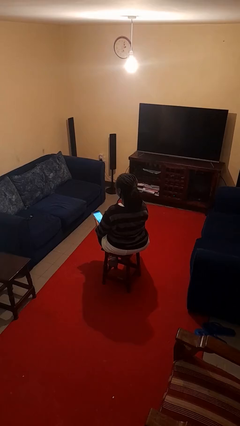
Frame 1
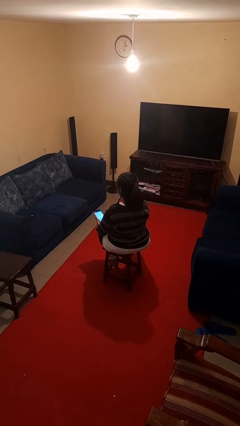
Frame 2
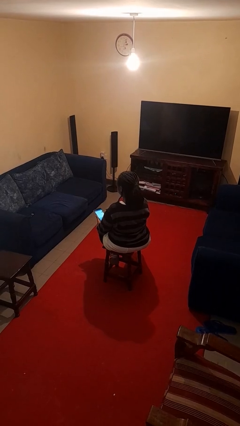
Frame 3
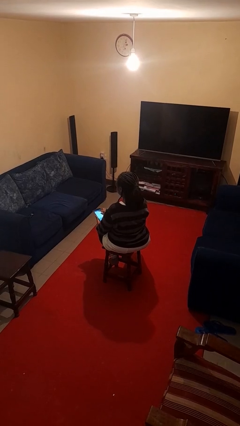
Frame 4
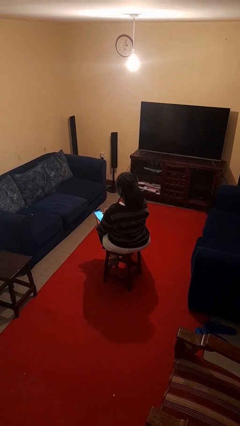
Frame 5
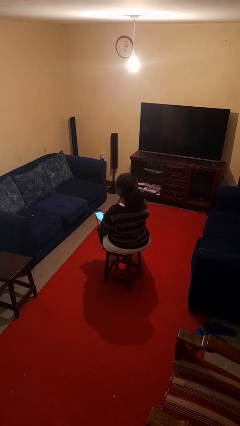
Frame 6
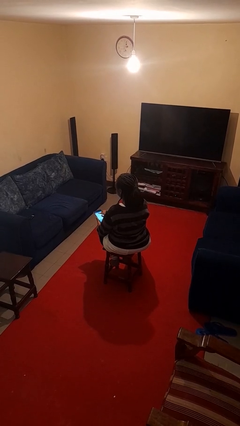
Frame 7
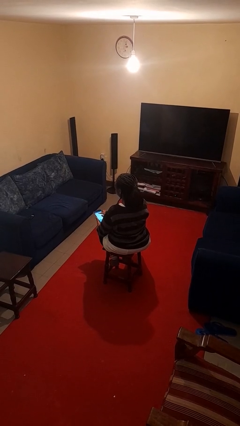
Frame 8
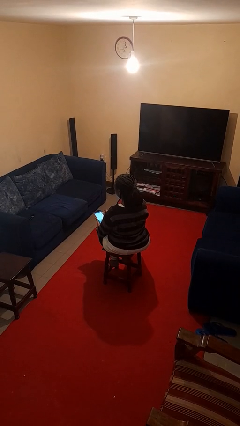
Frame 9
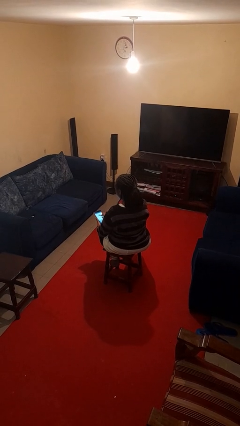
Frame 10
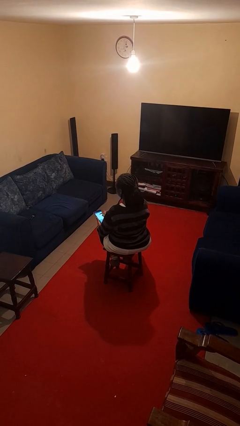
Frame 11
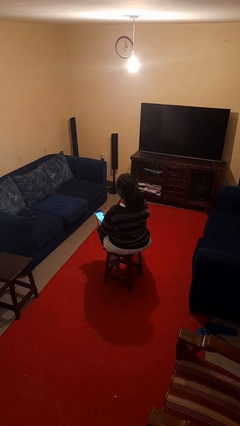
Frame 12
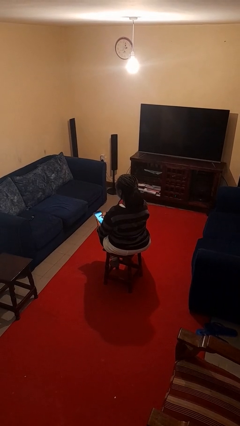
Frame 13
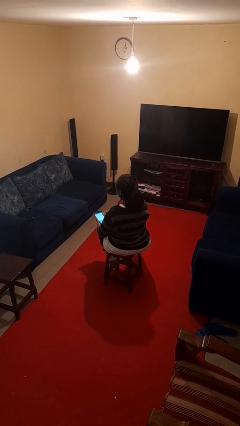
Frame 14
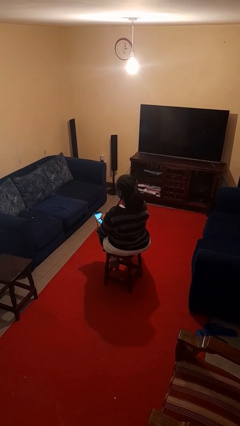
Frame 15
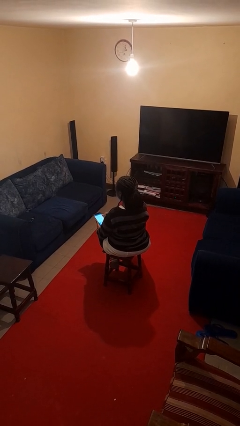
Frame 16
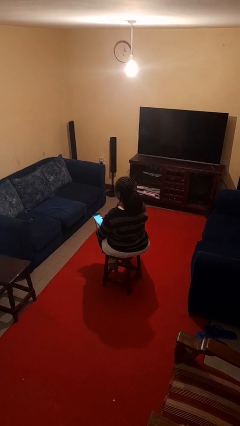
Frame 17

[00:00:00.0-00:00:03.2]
person interacts with tablet

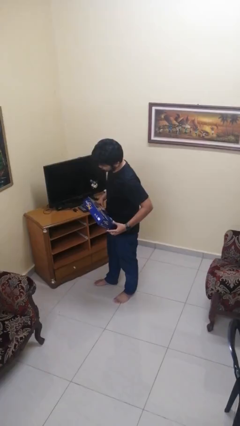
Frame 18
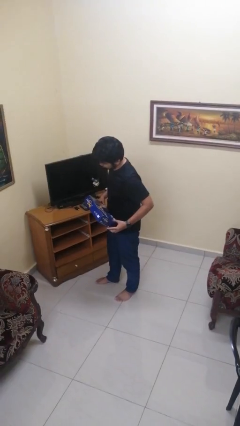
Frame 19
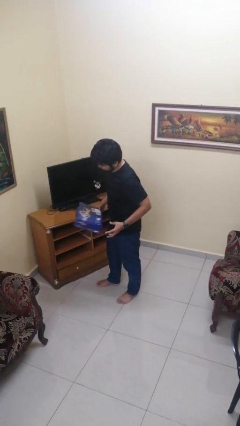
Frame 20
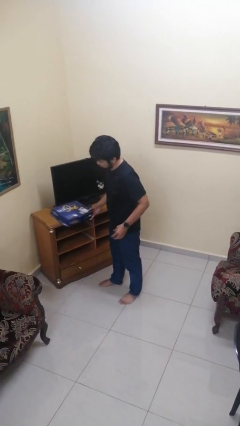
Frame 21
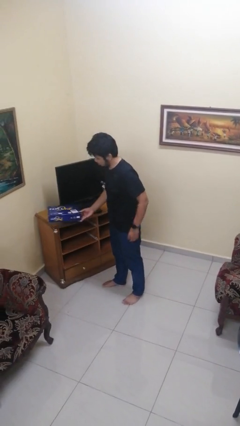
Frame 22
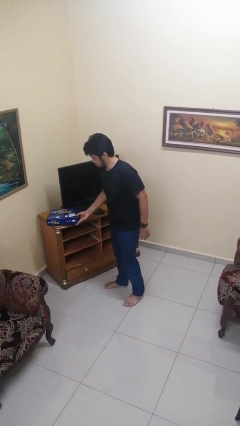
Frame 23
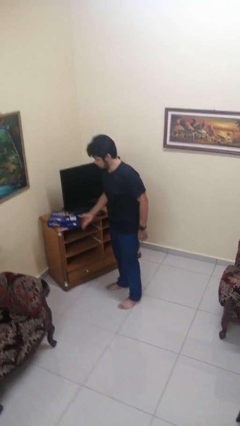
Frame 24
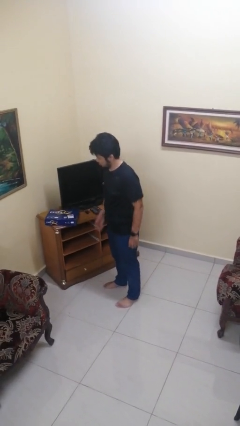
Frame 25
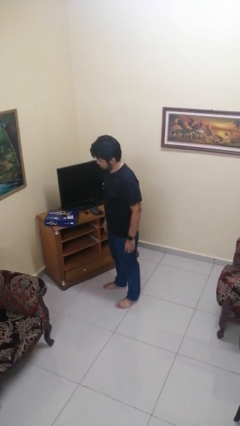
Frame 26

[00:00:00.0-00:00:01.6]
person puts down object on countertop

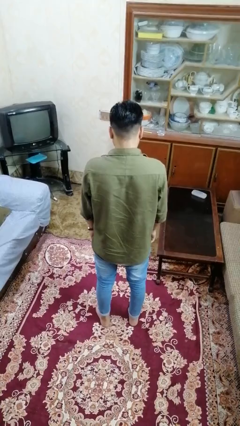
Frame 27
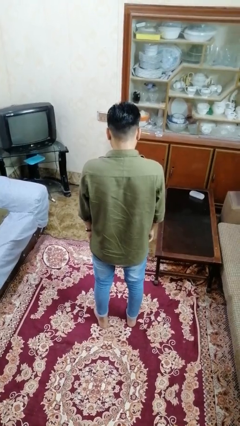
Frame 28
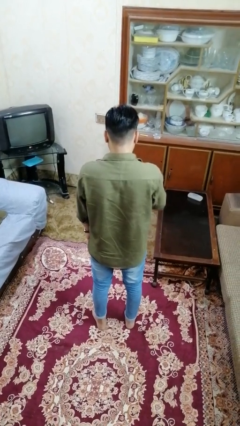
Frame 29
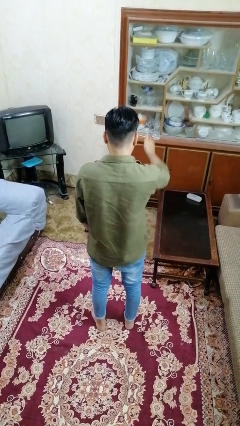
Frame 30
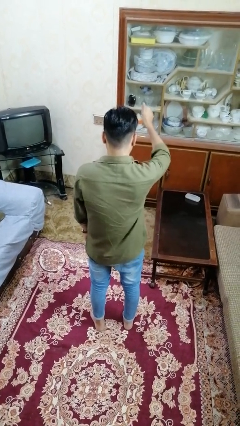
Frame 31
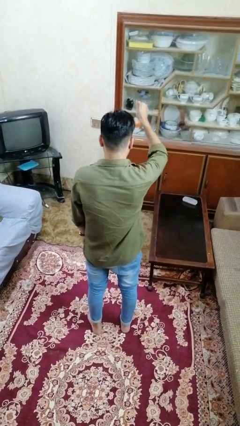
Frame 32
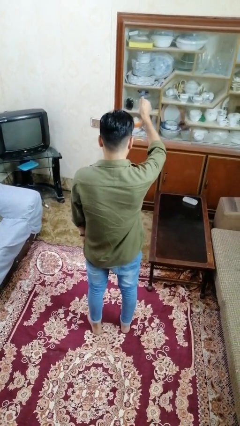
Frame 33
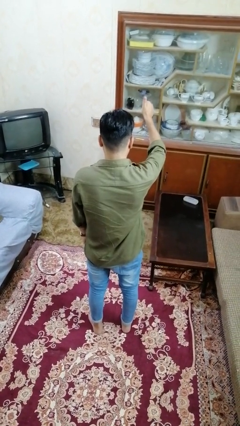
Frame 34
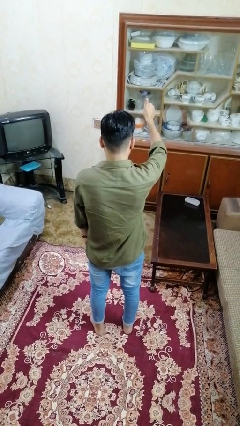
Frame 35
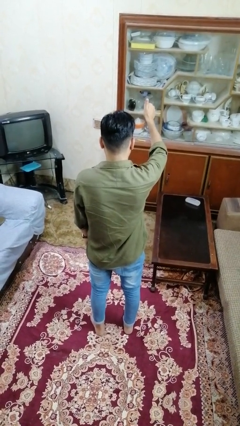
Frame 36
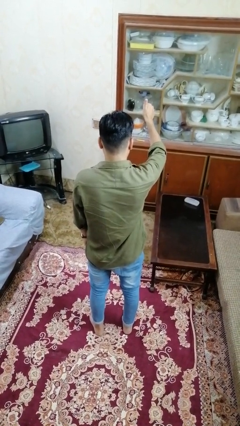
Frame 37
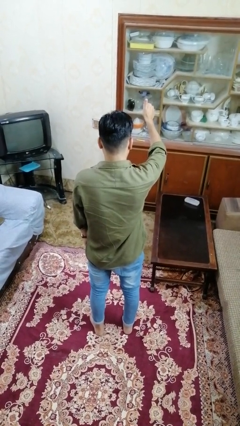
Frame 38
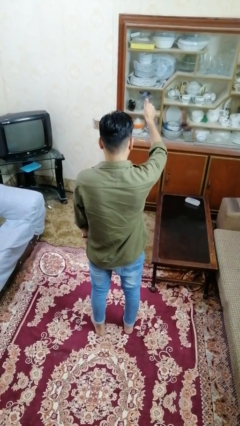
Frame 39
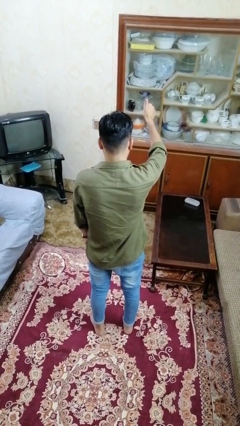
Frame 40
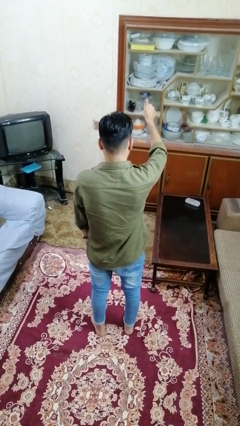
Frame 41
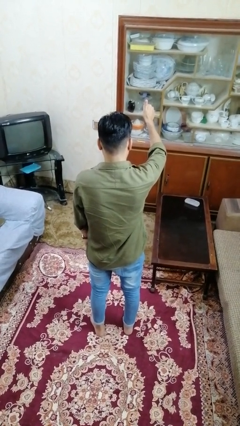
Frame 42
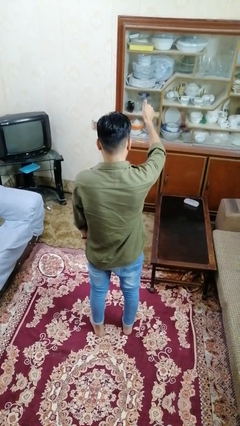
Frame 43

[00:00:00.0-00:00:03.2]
person gestures thumbs up

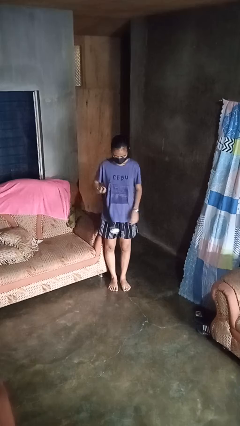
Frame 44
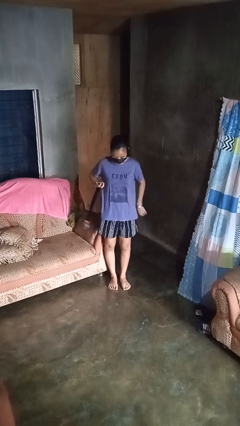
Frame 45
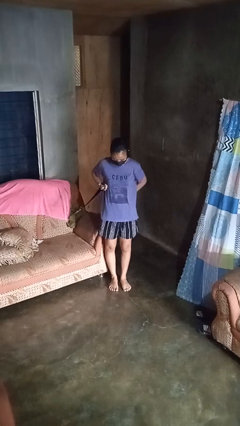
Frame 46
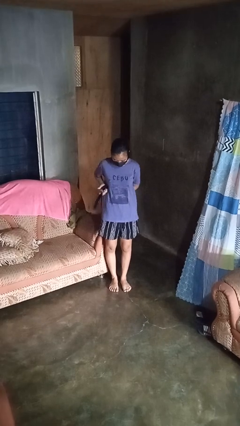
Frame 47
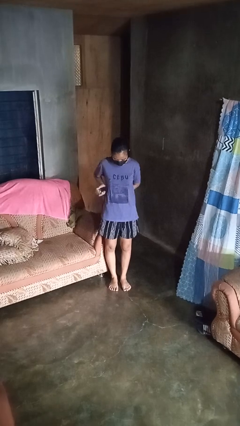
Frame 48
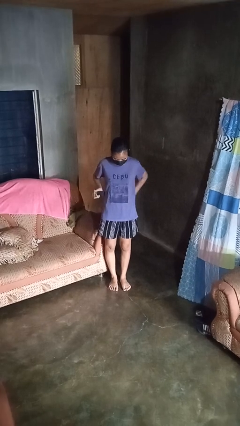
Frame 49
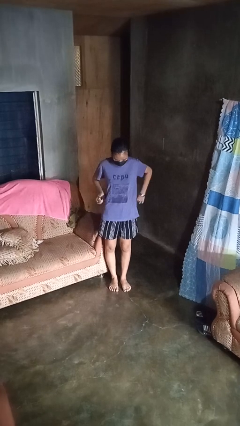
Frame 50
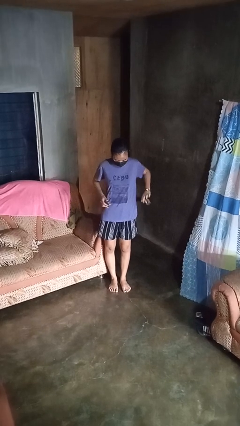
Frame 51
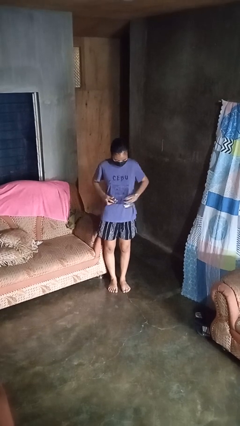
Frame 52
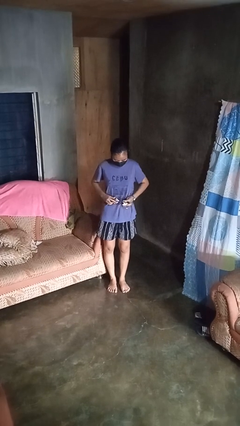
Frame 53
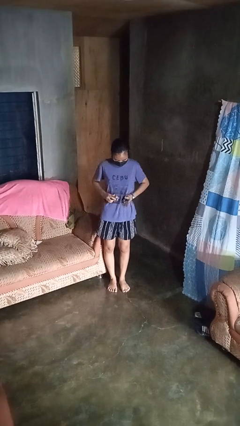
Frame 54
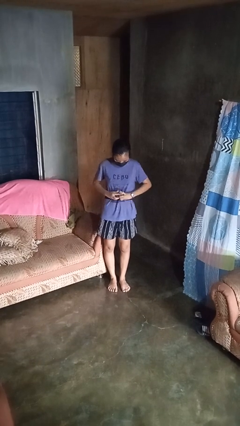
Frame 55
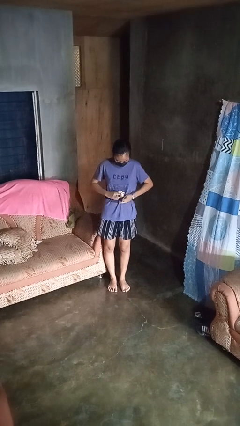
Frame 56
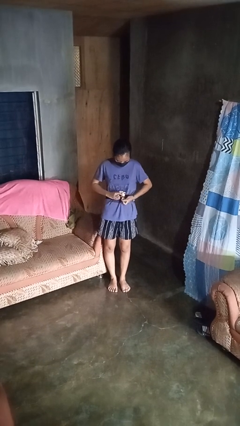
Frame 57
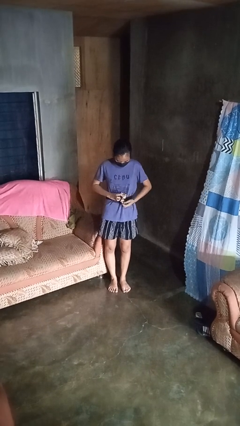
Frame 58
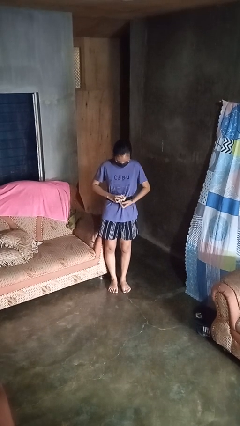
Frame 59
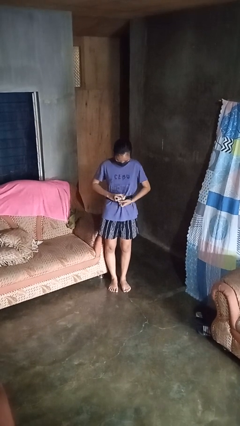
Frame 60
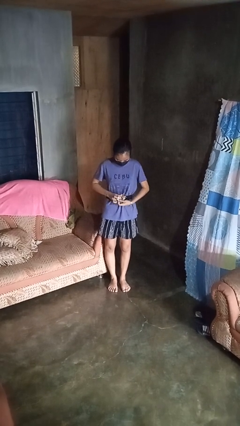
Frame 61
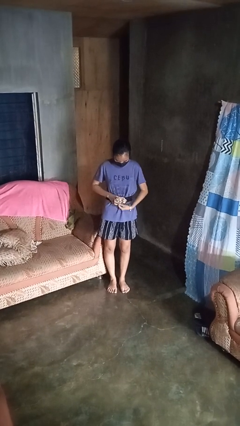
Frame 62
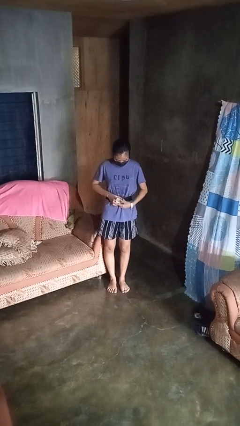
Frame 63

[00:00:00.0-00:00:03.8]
person puts on belt

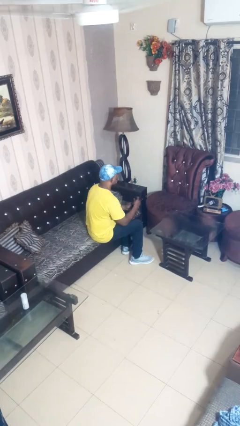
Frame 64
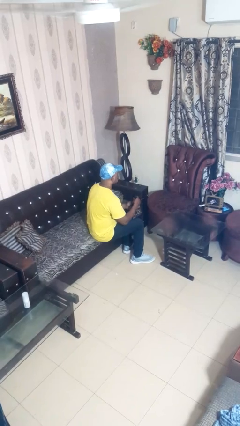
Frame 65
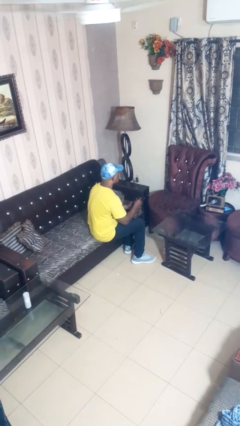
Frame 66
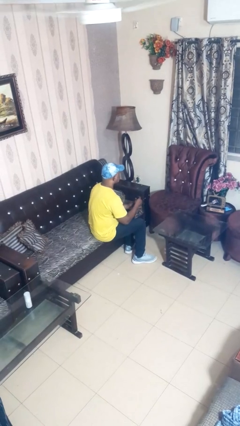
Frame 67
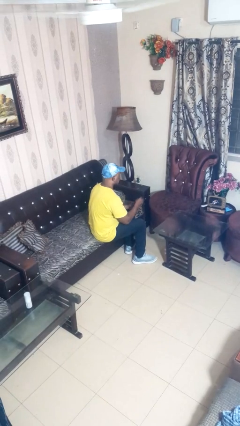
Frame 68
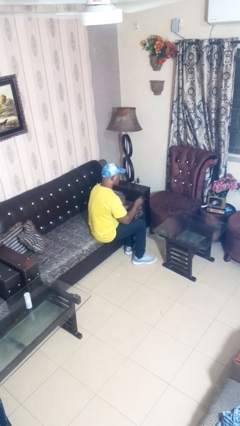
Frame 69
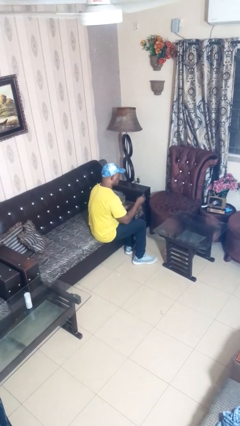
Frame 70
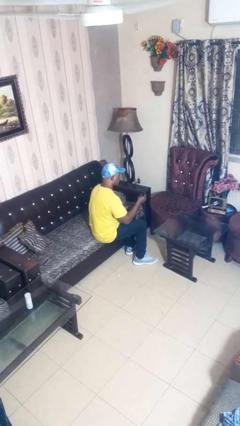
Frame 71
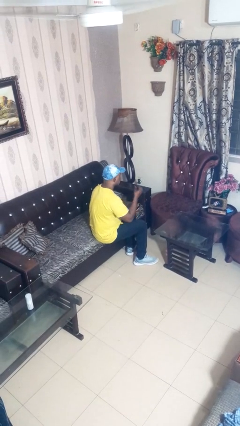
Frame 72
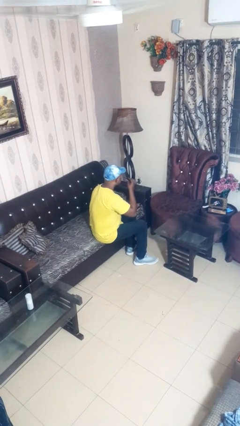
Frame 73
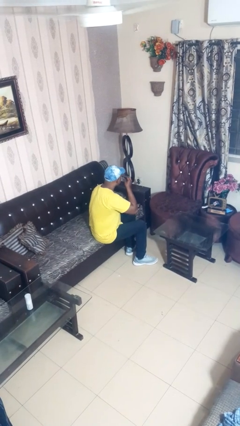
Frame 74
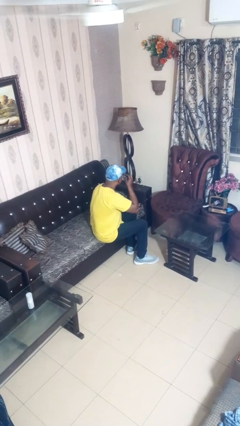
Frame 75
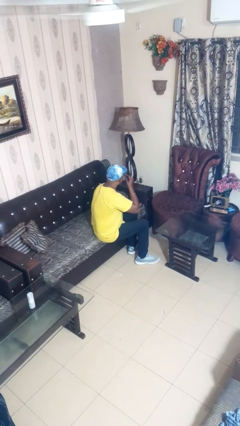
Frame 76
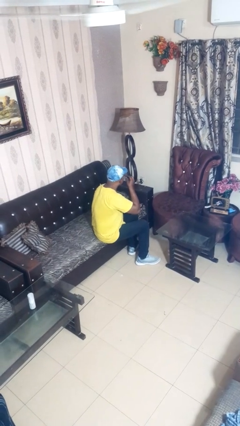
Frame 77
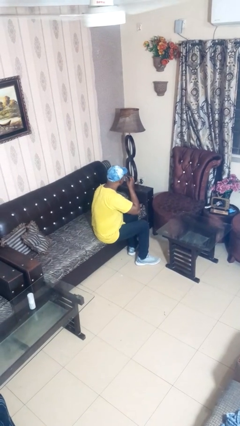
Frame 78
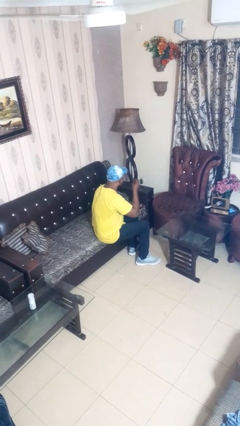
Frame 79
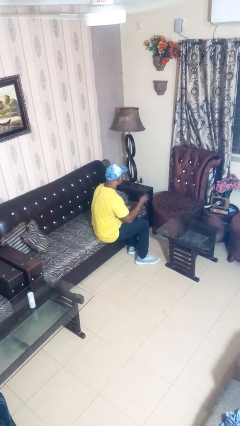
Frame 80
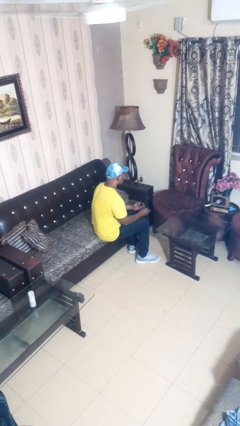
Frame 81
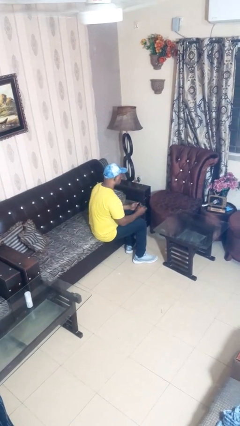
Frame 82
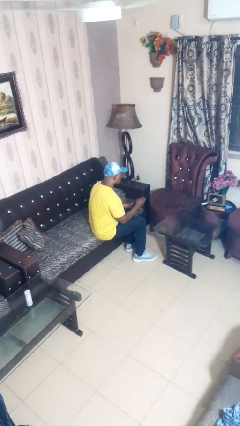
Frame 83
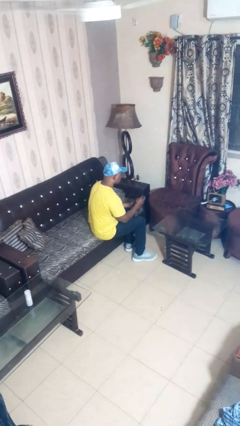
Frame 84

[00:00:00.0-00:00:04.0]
person applies eye makeup

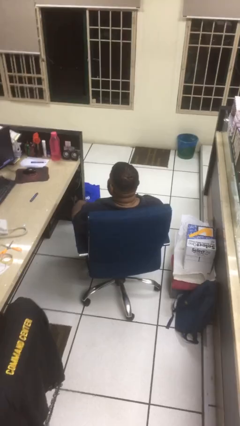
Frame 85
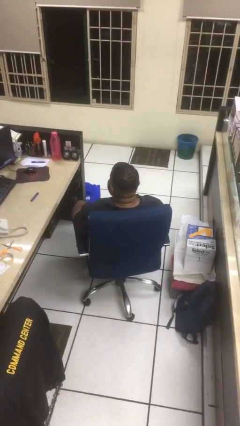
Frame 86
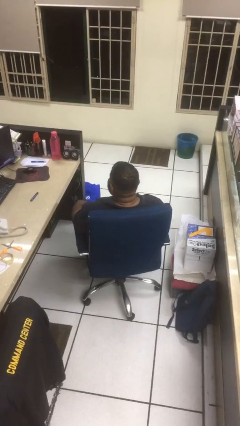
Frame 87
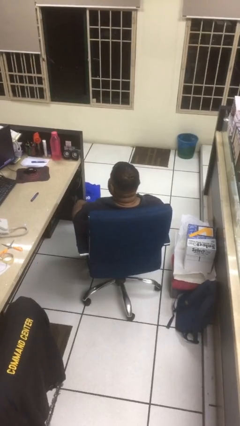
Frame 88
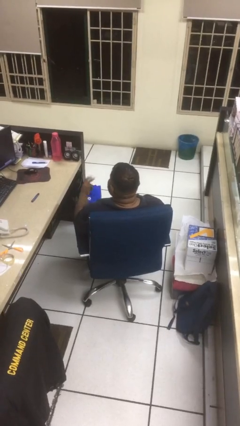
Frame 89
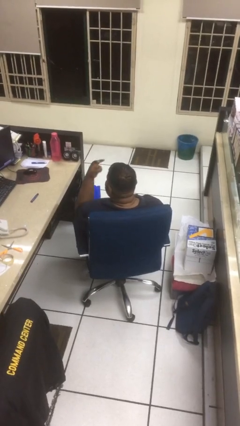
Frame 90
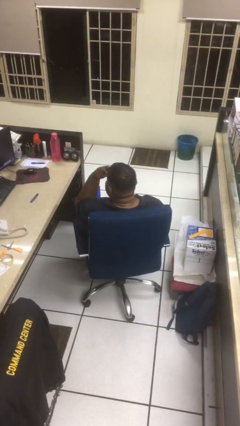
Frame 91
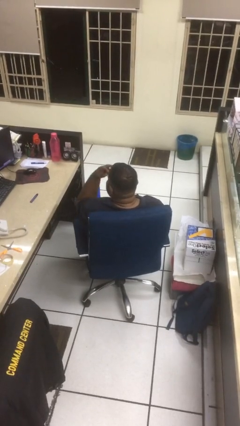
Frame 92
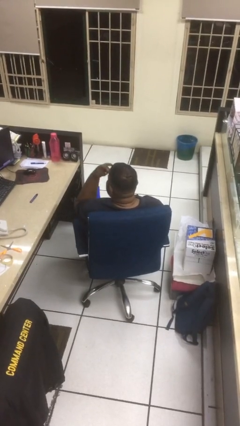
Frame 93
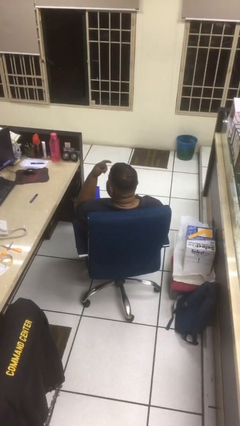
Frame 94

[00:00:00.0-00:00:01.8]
person gestures watch closely
